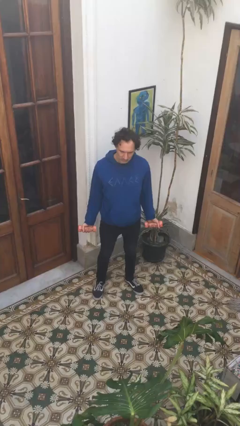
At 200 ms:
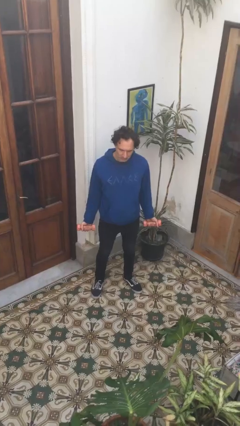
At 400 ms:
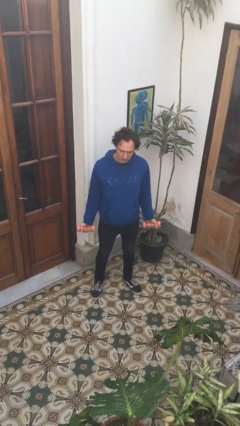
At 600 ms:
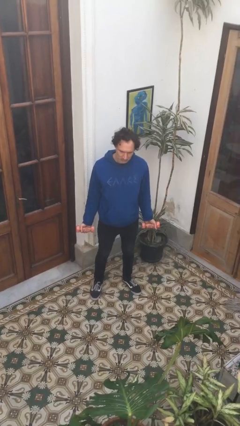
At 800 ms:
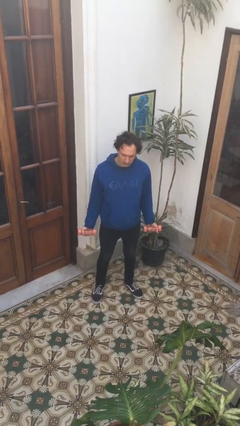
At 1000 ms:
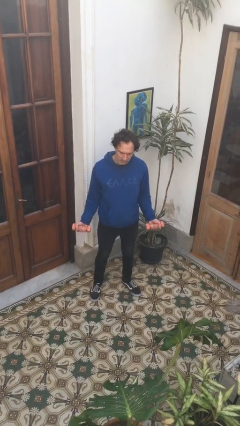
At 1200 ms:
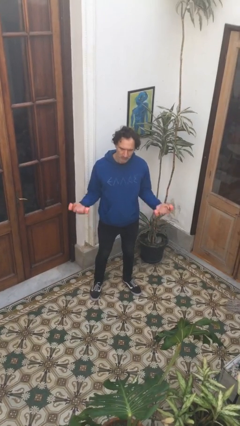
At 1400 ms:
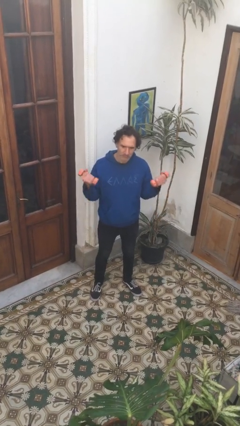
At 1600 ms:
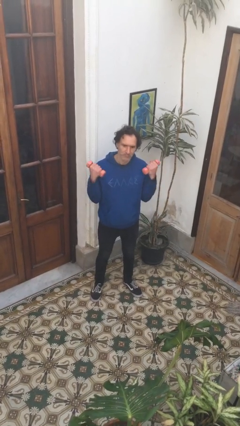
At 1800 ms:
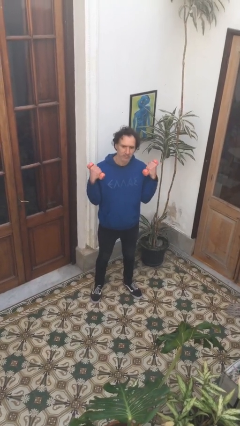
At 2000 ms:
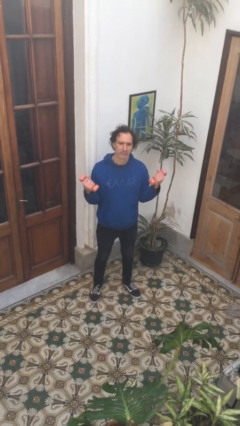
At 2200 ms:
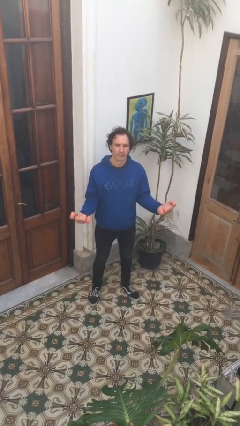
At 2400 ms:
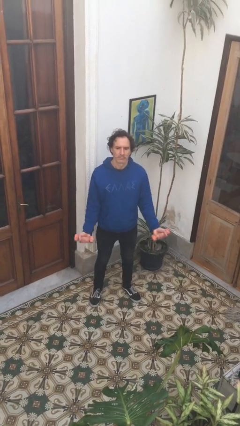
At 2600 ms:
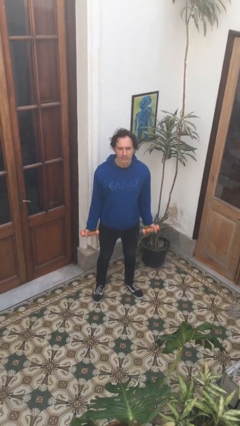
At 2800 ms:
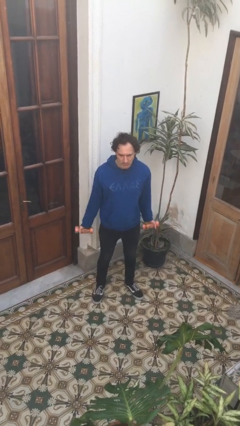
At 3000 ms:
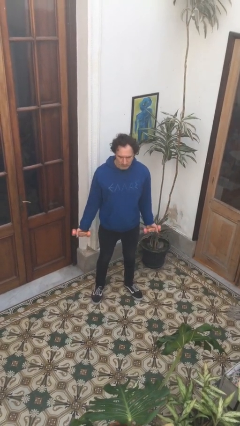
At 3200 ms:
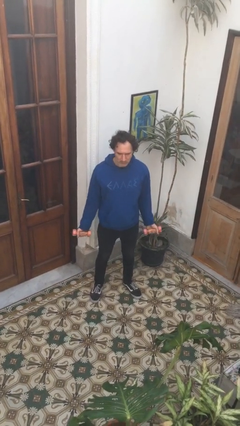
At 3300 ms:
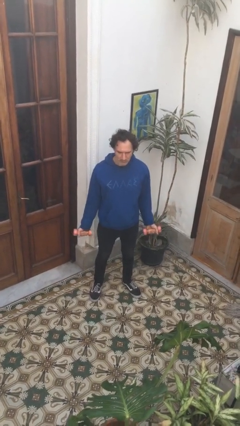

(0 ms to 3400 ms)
person lifts dumbbells

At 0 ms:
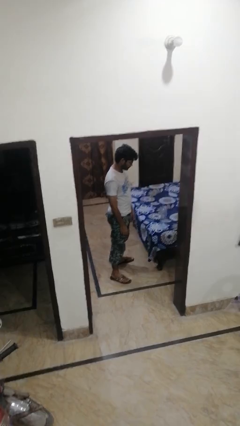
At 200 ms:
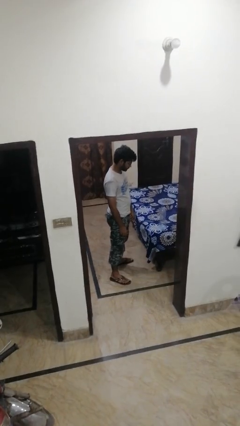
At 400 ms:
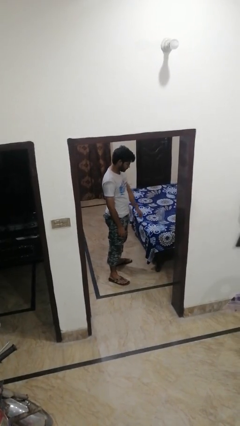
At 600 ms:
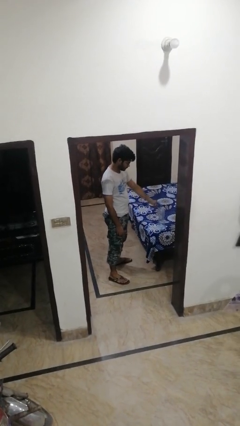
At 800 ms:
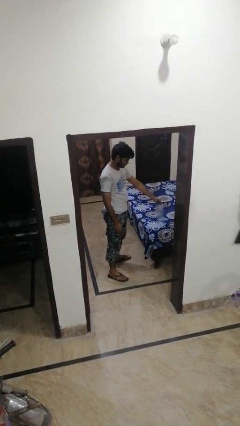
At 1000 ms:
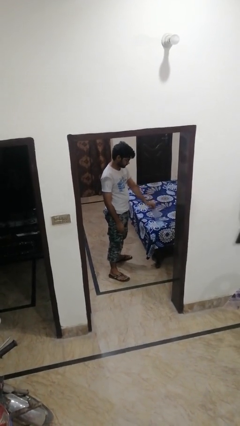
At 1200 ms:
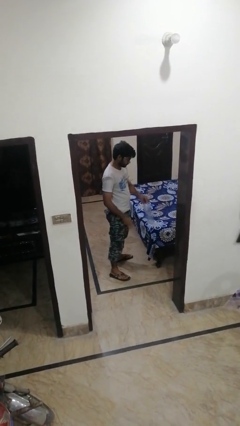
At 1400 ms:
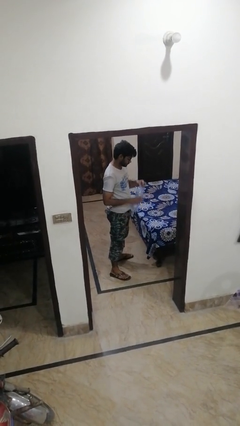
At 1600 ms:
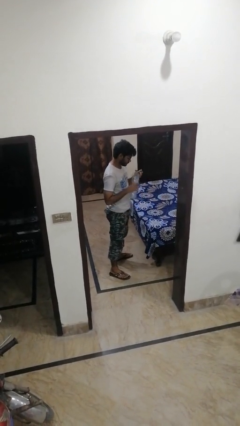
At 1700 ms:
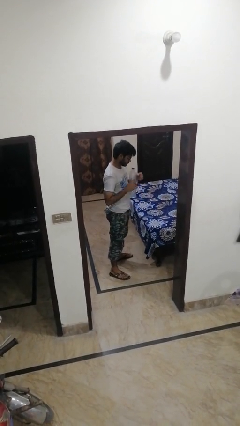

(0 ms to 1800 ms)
person picks up object from bed

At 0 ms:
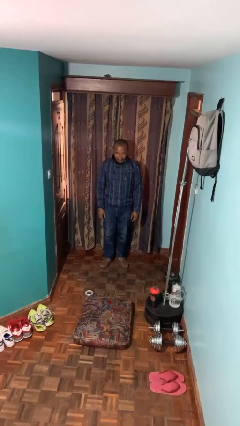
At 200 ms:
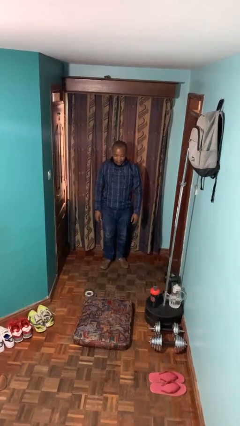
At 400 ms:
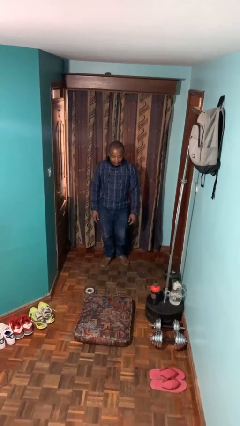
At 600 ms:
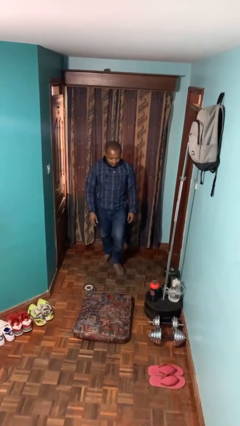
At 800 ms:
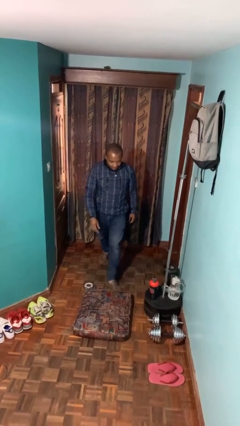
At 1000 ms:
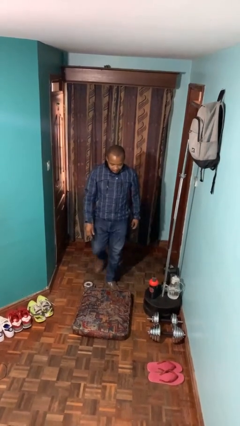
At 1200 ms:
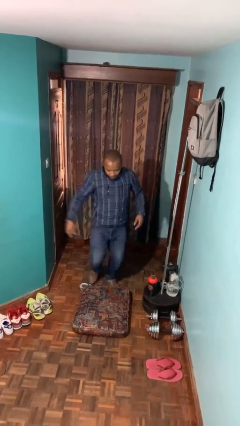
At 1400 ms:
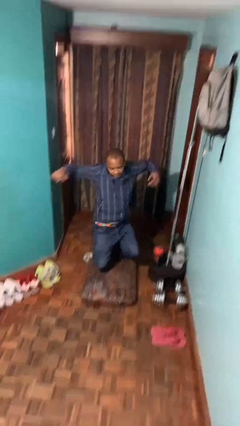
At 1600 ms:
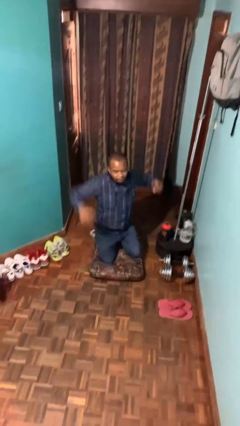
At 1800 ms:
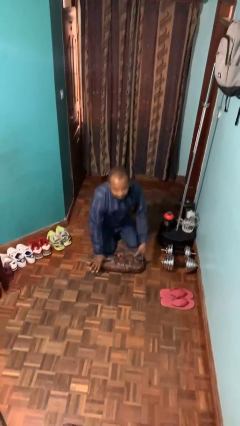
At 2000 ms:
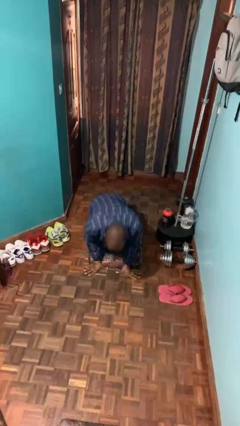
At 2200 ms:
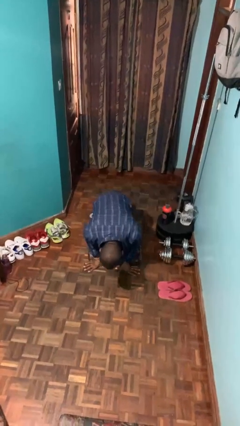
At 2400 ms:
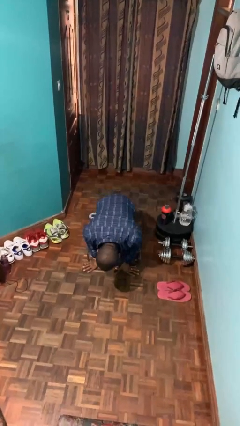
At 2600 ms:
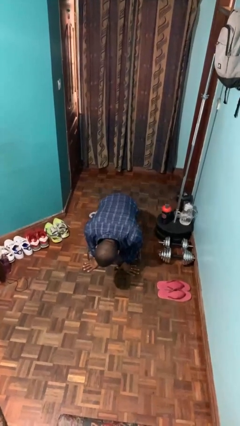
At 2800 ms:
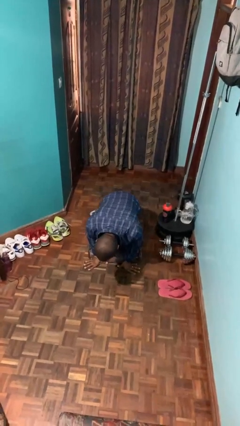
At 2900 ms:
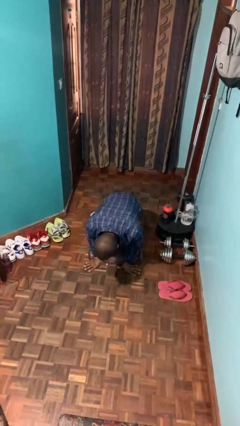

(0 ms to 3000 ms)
person trips on object on floor

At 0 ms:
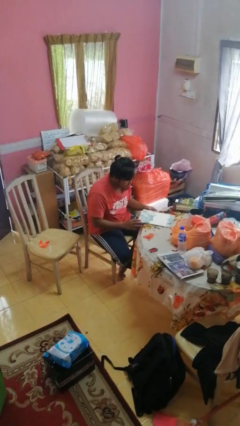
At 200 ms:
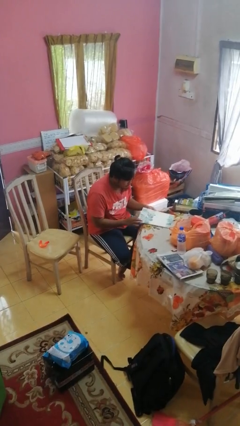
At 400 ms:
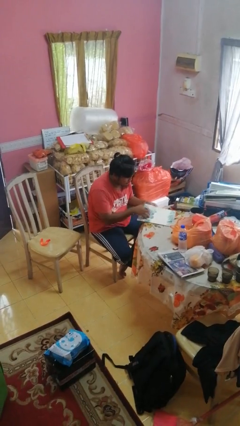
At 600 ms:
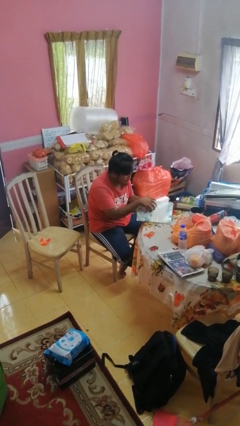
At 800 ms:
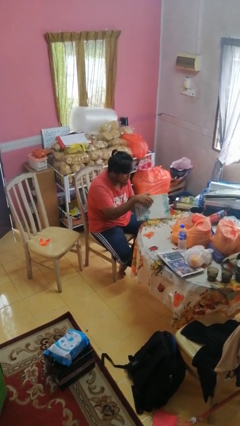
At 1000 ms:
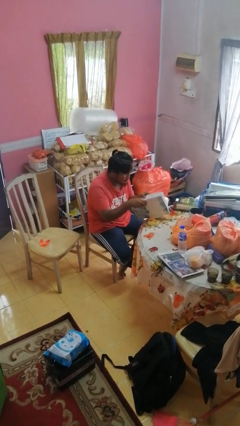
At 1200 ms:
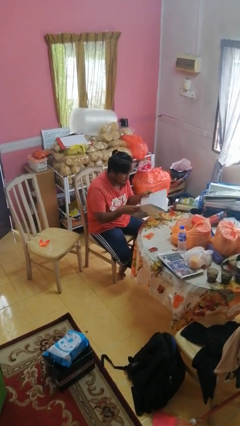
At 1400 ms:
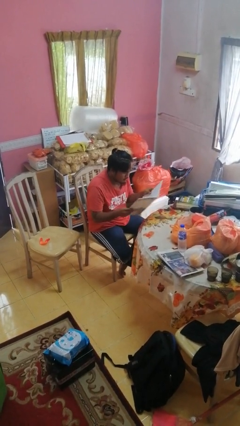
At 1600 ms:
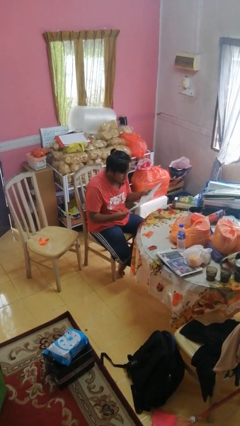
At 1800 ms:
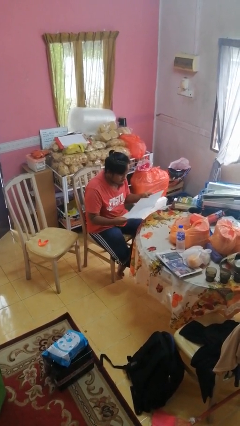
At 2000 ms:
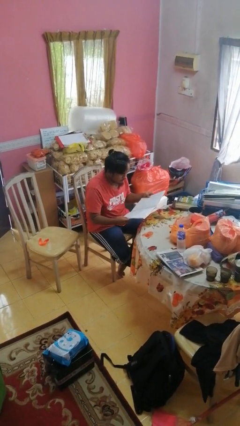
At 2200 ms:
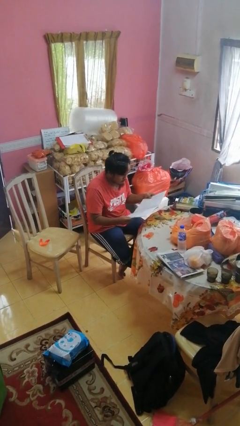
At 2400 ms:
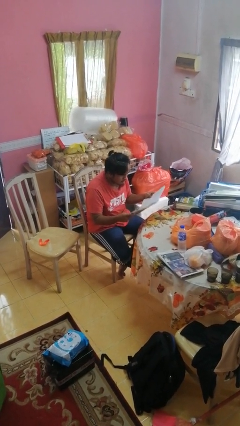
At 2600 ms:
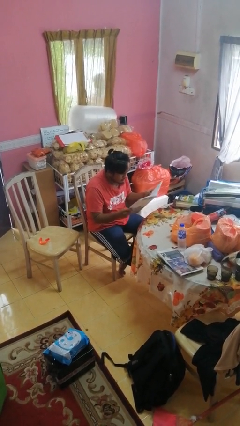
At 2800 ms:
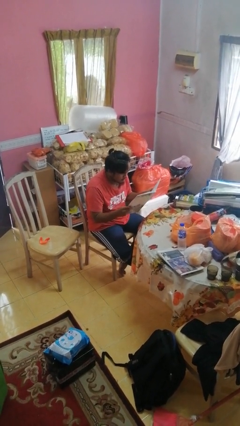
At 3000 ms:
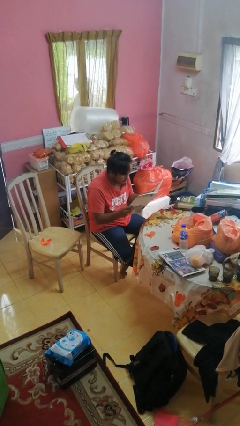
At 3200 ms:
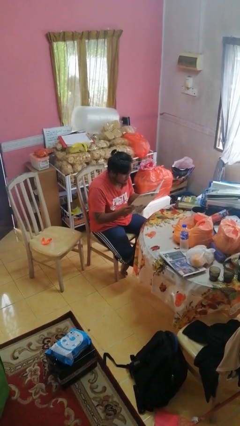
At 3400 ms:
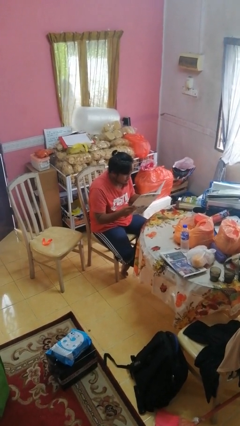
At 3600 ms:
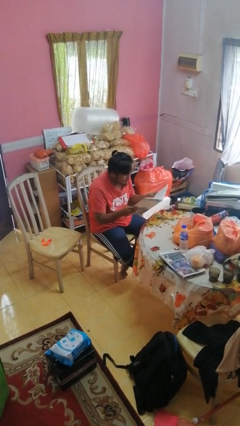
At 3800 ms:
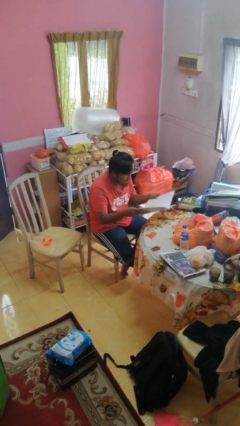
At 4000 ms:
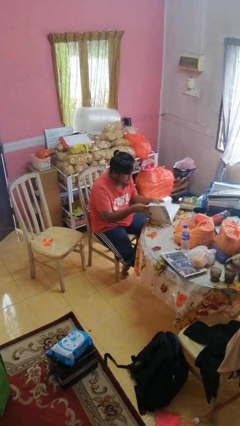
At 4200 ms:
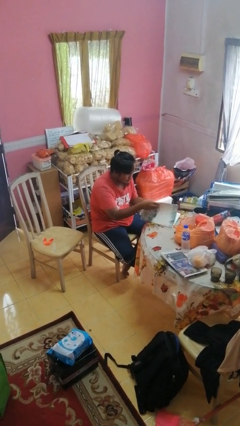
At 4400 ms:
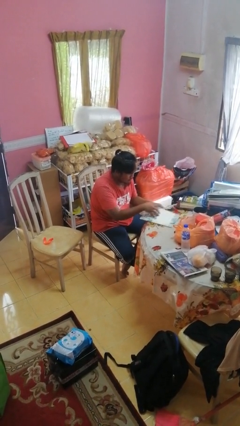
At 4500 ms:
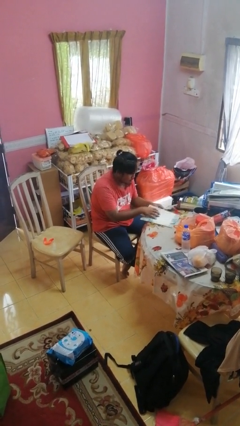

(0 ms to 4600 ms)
person reads magazine

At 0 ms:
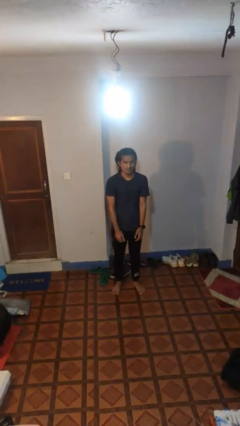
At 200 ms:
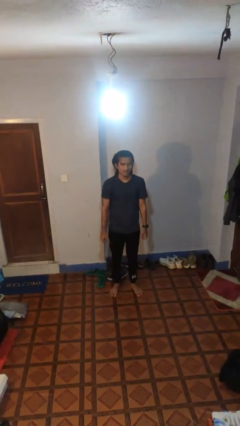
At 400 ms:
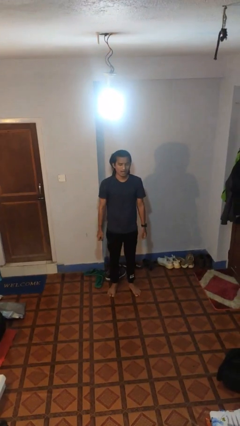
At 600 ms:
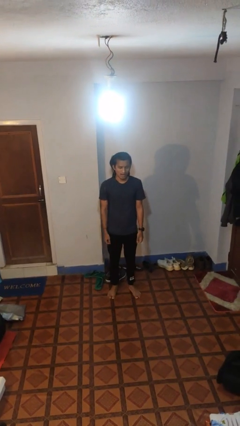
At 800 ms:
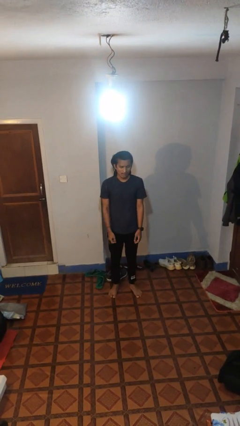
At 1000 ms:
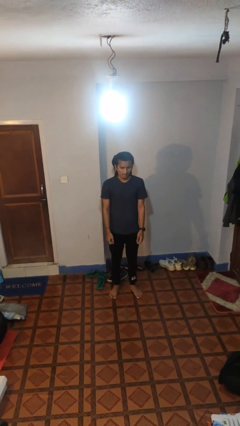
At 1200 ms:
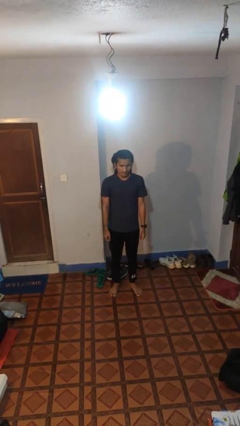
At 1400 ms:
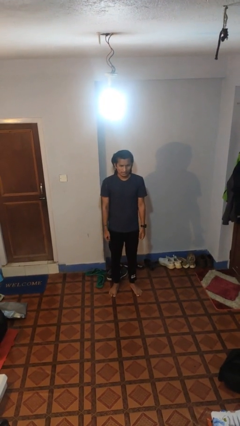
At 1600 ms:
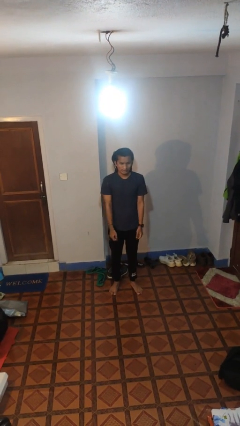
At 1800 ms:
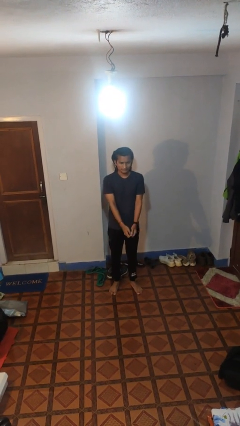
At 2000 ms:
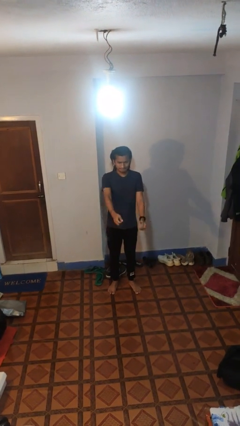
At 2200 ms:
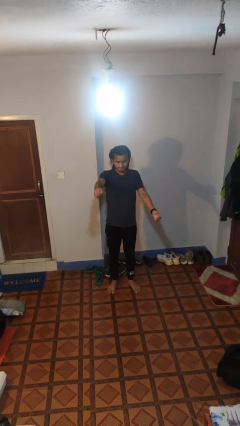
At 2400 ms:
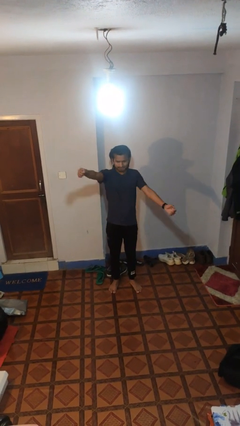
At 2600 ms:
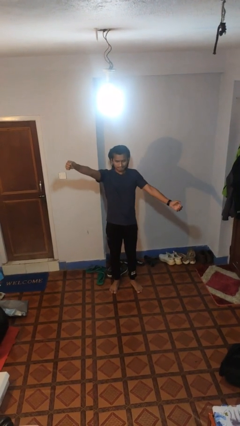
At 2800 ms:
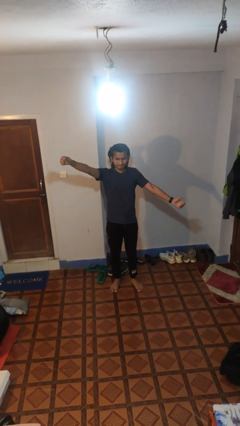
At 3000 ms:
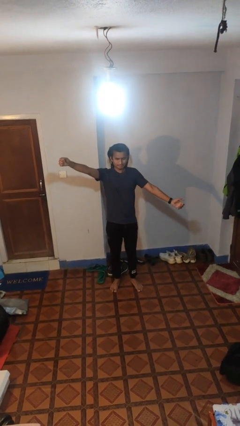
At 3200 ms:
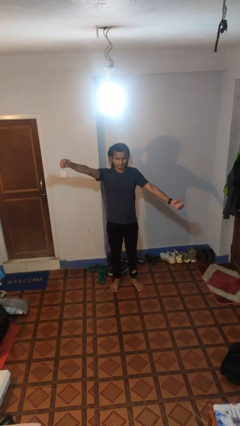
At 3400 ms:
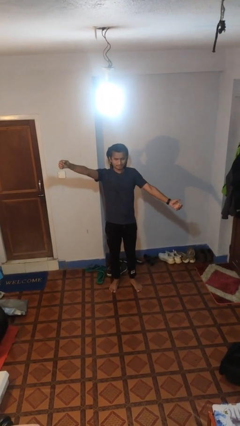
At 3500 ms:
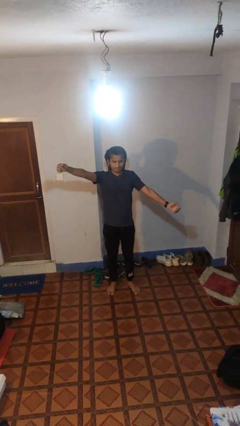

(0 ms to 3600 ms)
person gestures zoom in

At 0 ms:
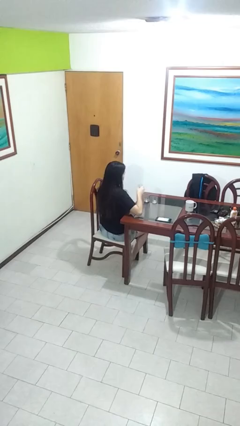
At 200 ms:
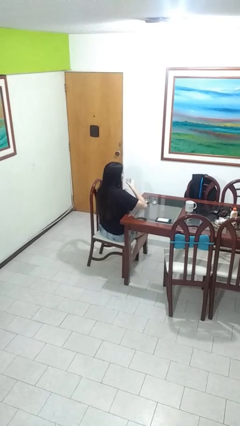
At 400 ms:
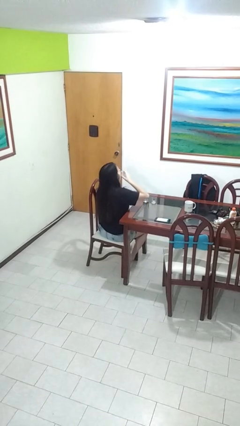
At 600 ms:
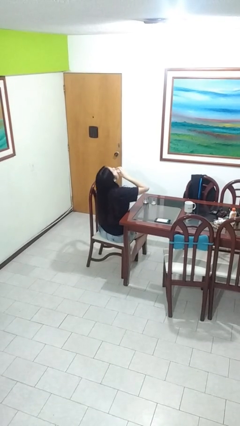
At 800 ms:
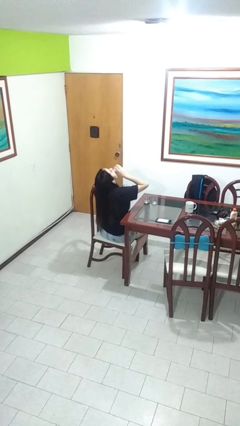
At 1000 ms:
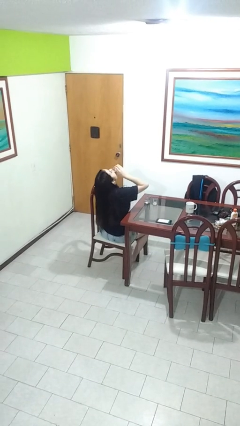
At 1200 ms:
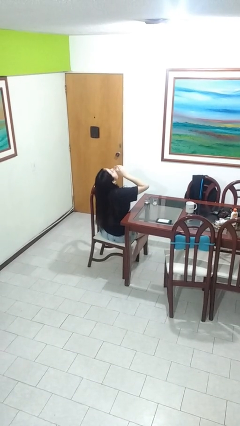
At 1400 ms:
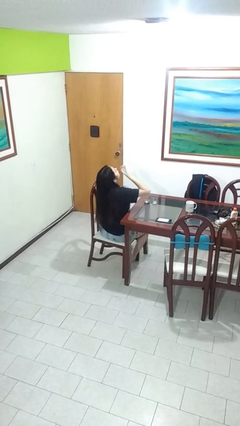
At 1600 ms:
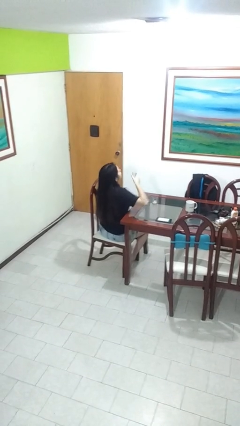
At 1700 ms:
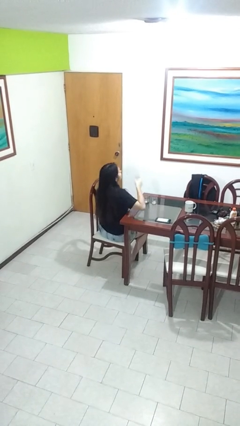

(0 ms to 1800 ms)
person drinks from shotglass
